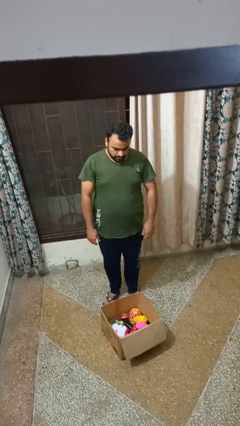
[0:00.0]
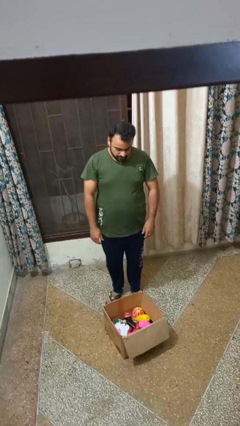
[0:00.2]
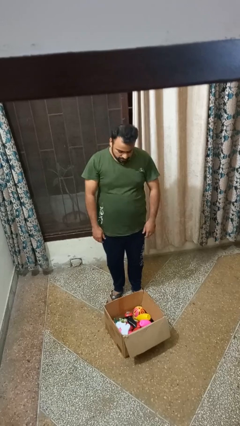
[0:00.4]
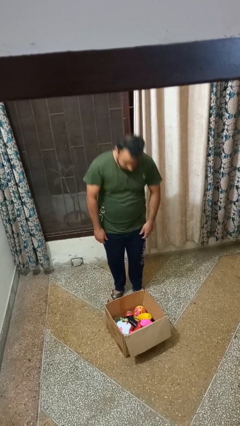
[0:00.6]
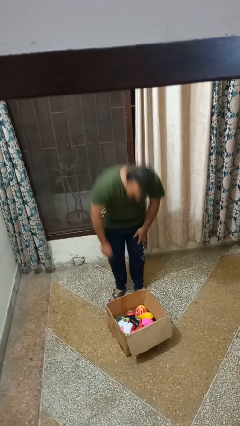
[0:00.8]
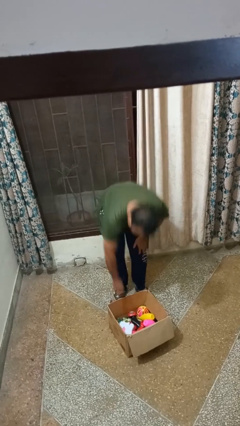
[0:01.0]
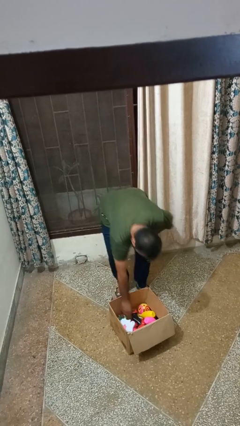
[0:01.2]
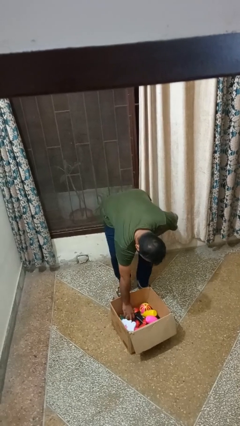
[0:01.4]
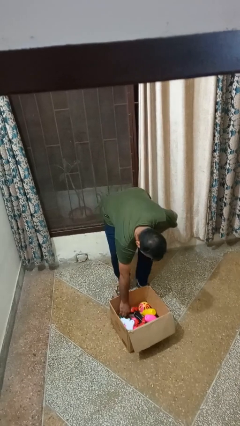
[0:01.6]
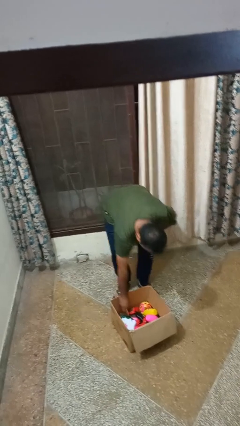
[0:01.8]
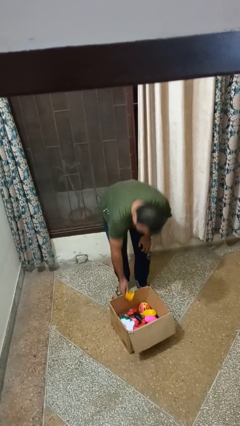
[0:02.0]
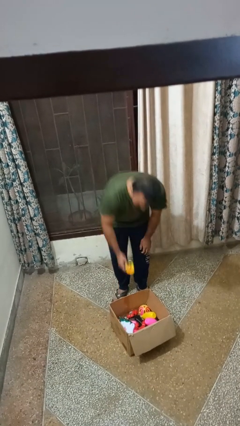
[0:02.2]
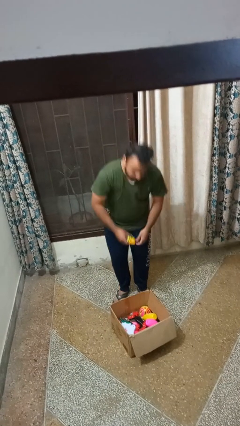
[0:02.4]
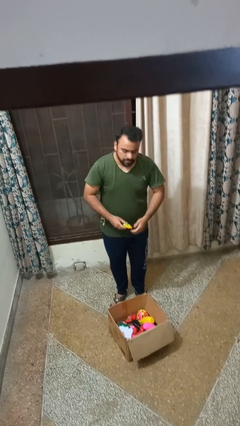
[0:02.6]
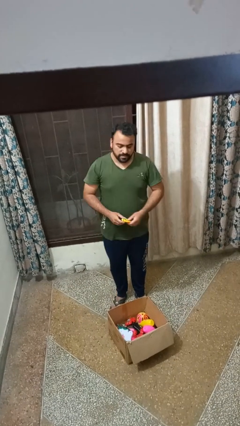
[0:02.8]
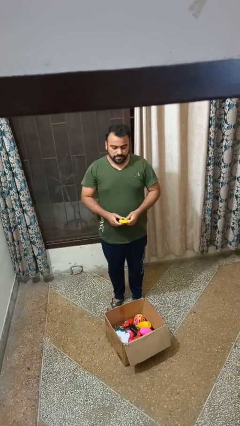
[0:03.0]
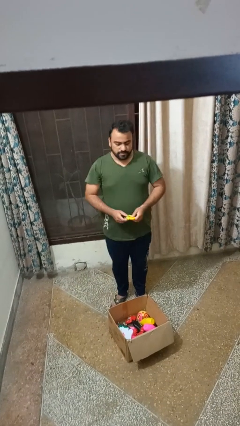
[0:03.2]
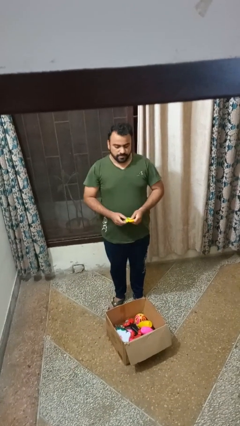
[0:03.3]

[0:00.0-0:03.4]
person takes object from box

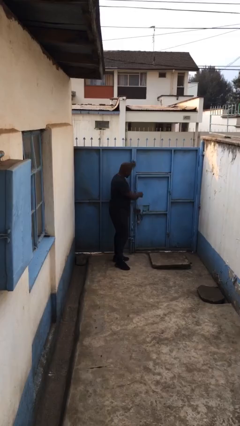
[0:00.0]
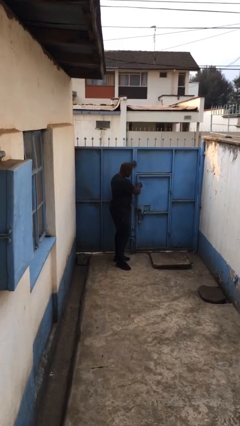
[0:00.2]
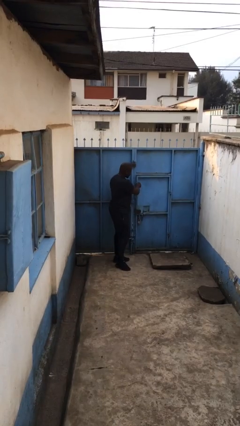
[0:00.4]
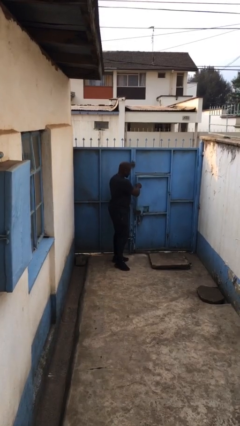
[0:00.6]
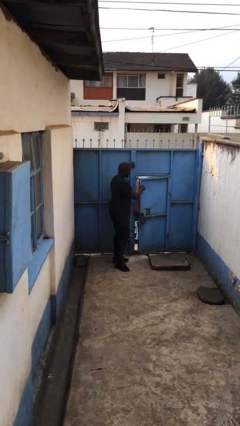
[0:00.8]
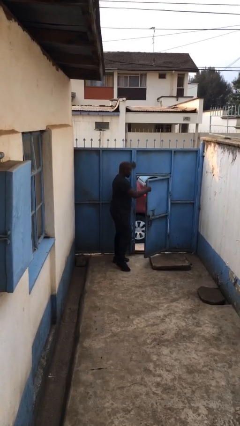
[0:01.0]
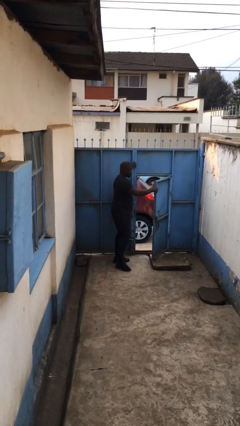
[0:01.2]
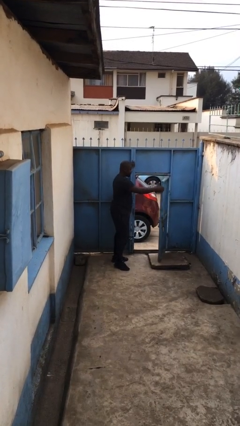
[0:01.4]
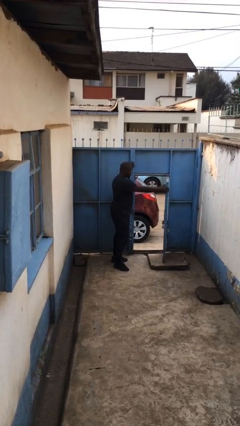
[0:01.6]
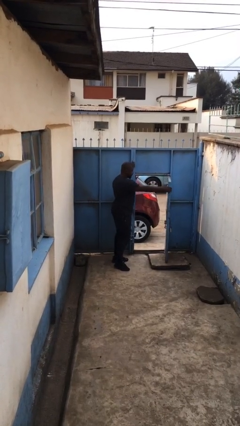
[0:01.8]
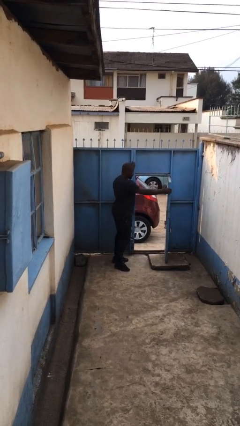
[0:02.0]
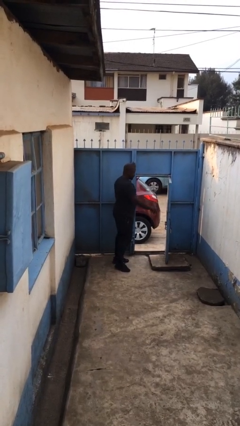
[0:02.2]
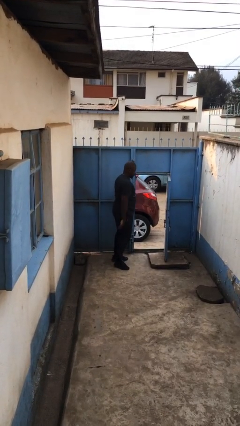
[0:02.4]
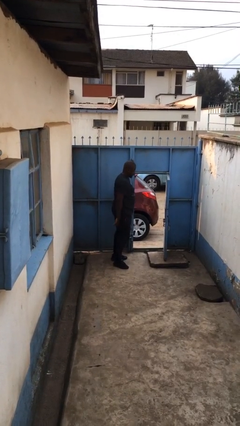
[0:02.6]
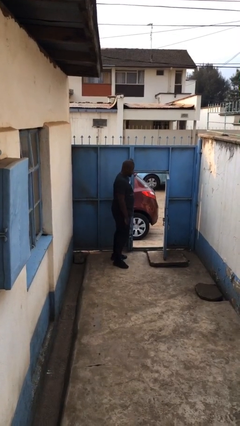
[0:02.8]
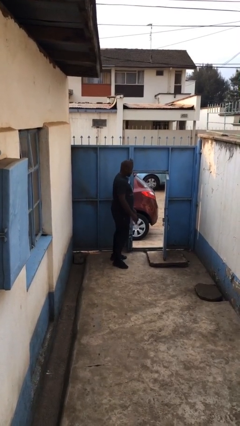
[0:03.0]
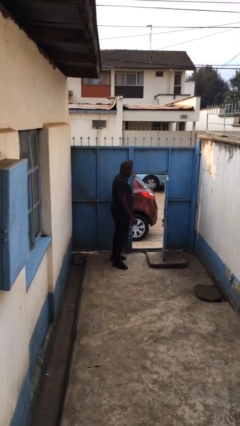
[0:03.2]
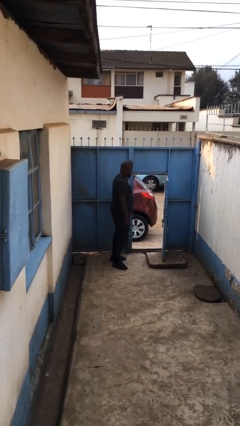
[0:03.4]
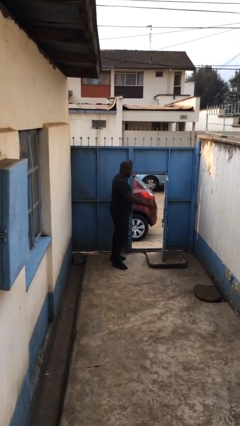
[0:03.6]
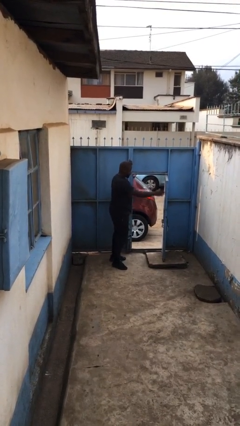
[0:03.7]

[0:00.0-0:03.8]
person opens gate

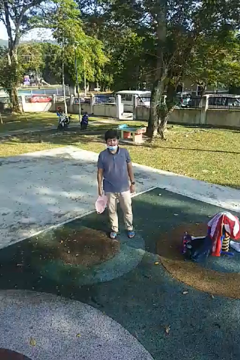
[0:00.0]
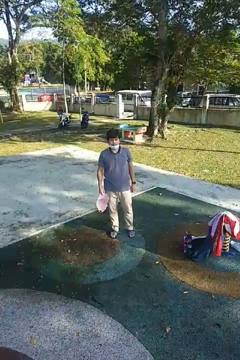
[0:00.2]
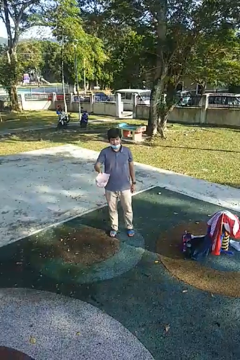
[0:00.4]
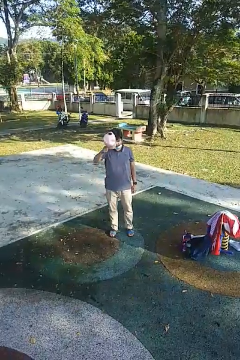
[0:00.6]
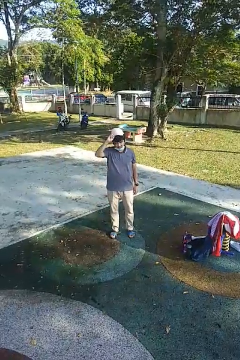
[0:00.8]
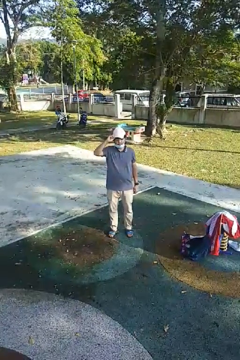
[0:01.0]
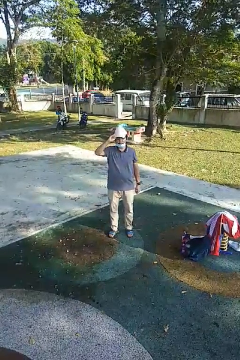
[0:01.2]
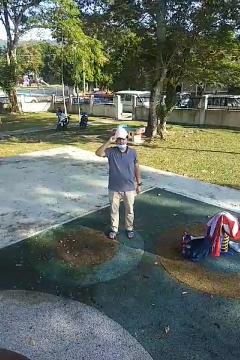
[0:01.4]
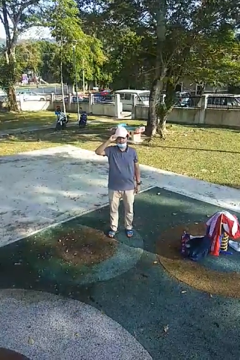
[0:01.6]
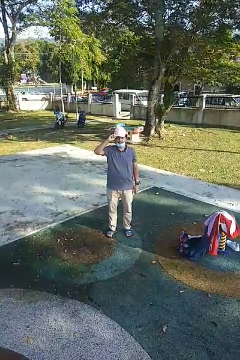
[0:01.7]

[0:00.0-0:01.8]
person puts on hat

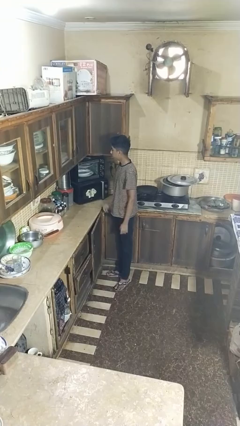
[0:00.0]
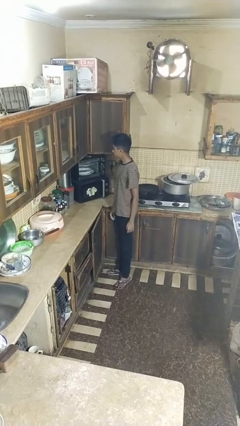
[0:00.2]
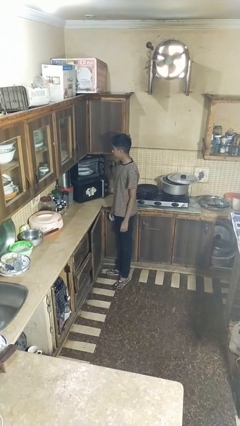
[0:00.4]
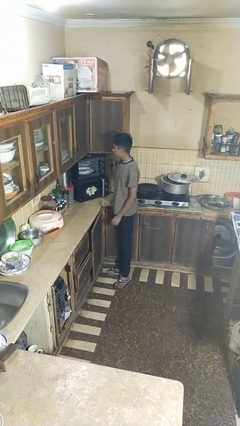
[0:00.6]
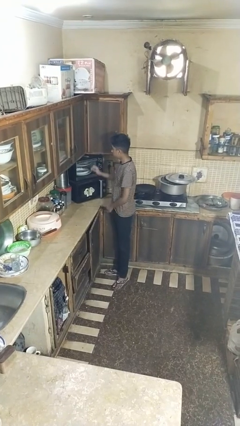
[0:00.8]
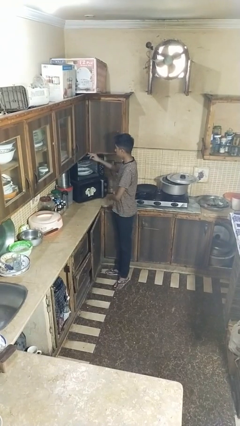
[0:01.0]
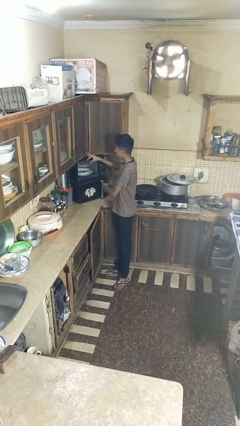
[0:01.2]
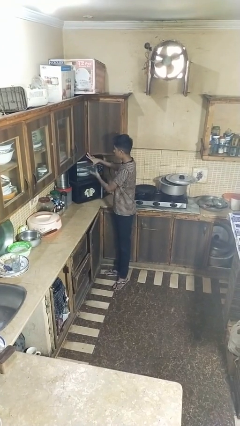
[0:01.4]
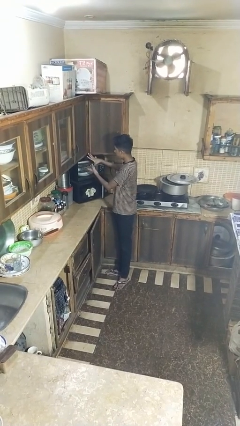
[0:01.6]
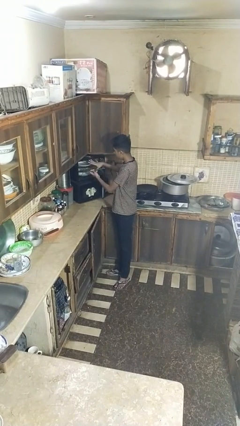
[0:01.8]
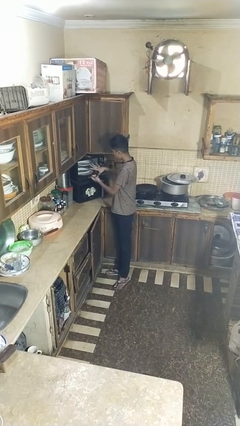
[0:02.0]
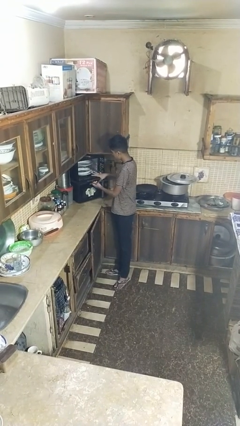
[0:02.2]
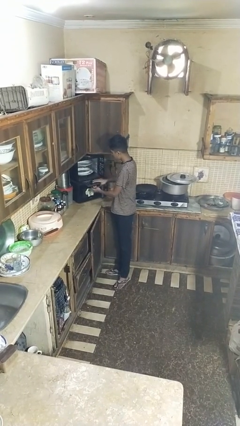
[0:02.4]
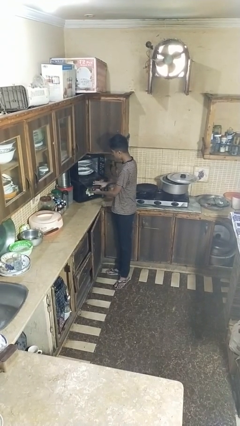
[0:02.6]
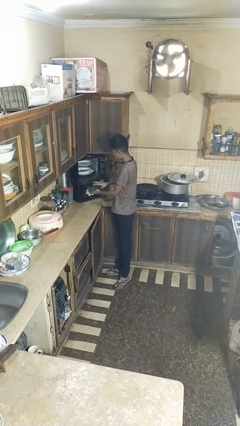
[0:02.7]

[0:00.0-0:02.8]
person opens dishwasher

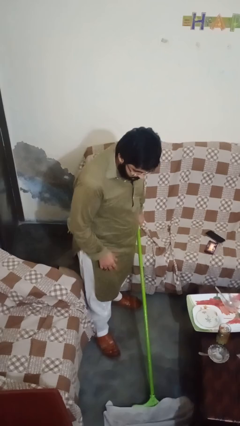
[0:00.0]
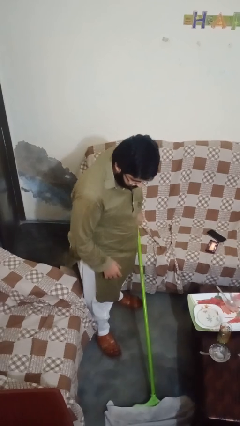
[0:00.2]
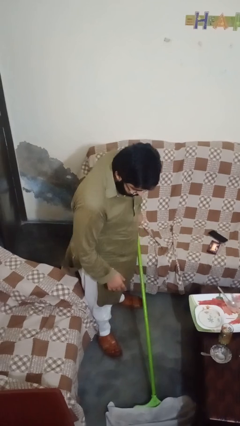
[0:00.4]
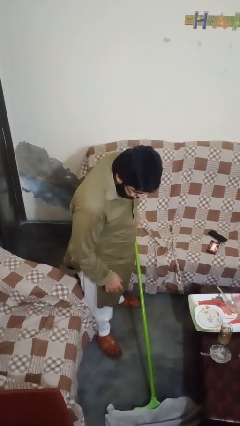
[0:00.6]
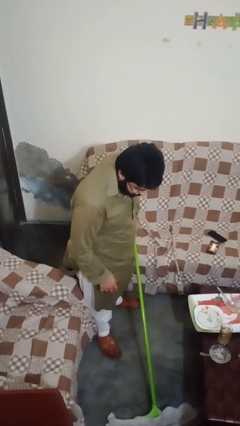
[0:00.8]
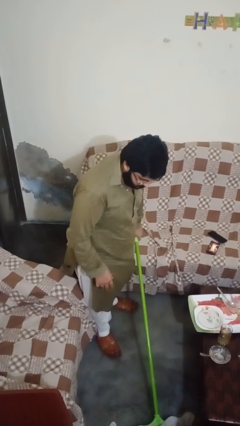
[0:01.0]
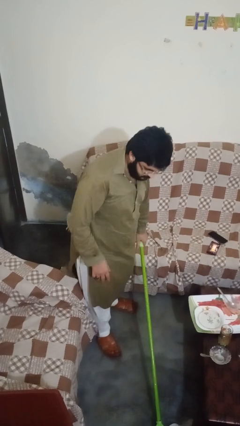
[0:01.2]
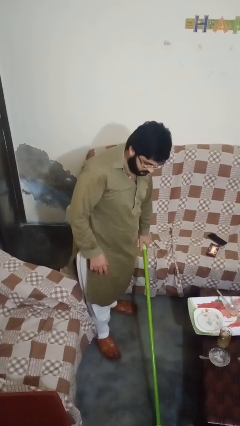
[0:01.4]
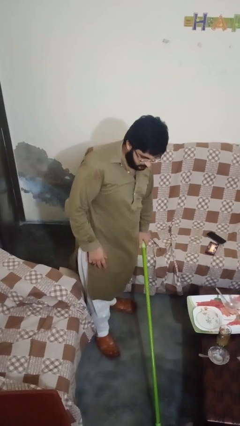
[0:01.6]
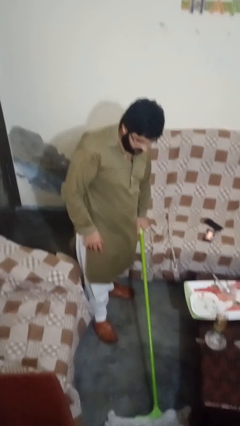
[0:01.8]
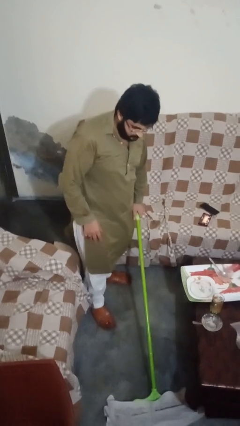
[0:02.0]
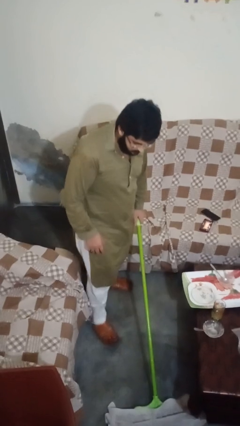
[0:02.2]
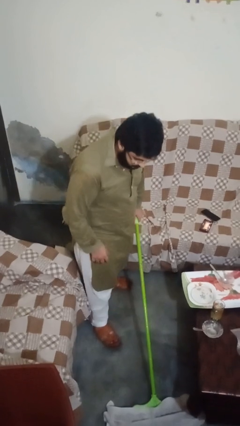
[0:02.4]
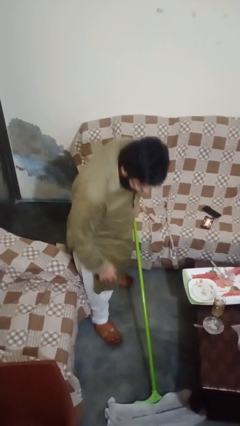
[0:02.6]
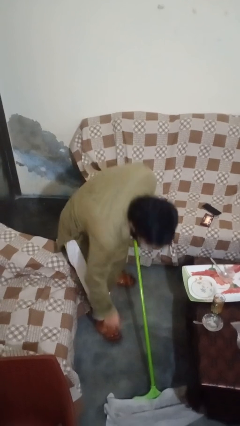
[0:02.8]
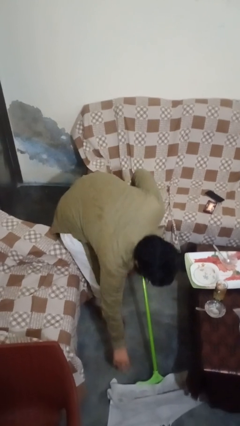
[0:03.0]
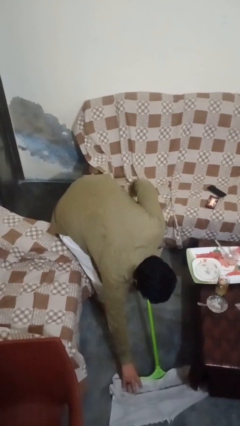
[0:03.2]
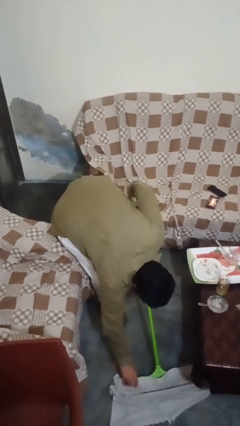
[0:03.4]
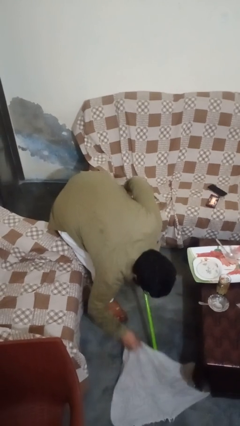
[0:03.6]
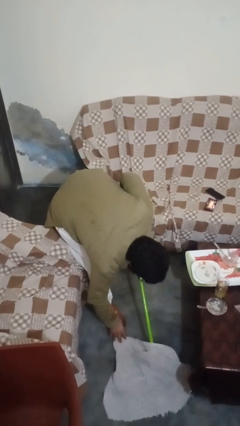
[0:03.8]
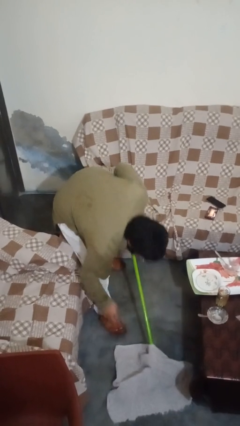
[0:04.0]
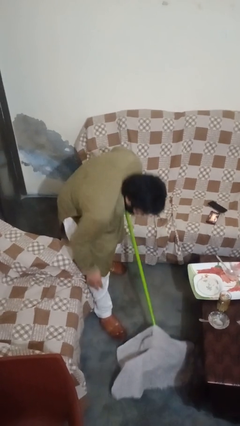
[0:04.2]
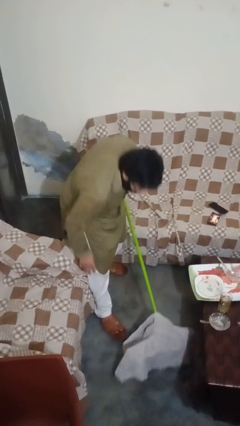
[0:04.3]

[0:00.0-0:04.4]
person mops

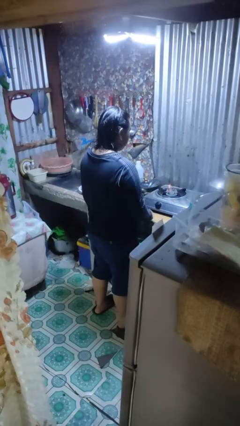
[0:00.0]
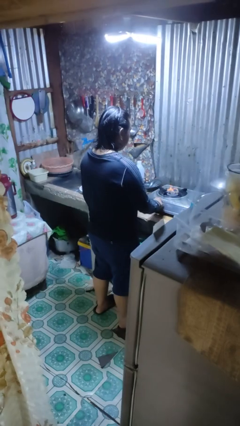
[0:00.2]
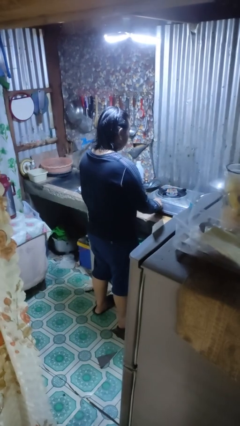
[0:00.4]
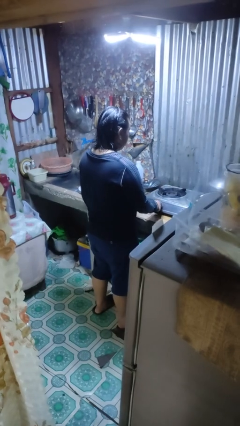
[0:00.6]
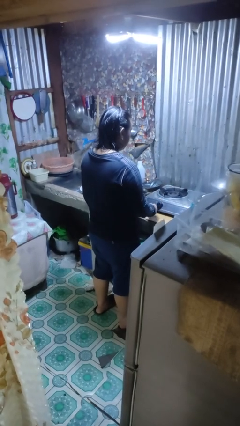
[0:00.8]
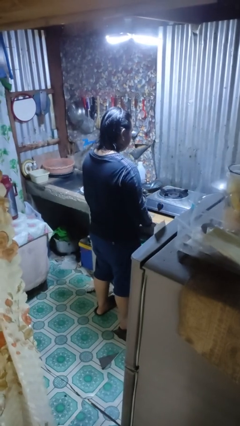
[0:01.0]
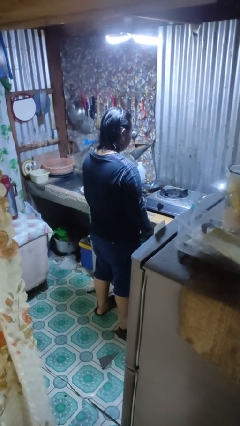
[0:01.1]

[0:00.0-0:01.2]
person turns off stovetop
